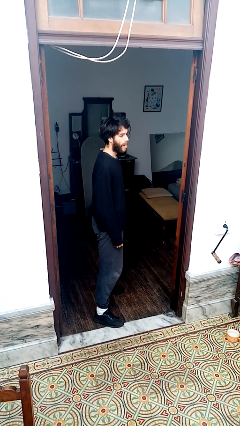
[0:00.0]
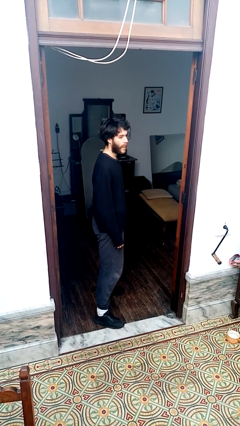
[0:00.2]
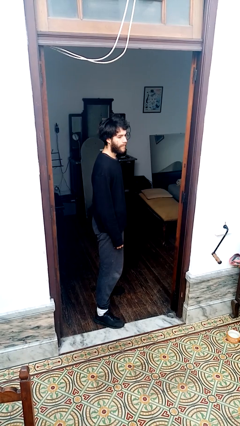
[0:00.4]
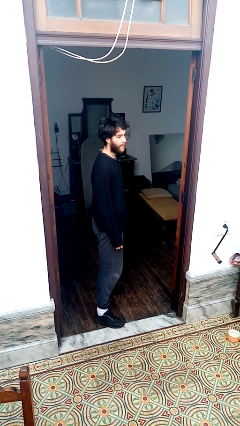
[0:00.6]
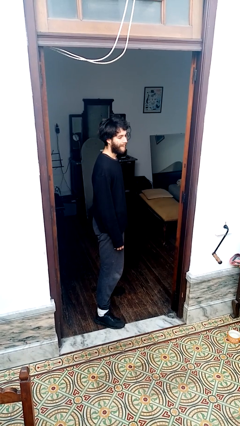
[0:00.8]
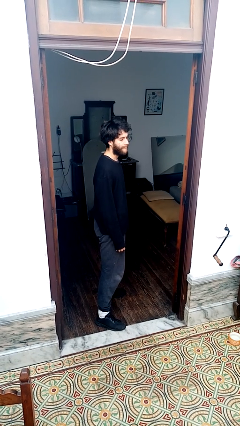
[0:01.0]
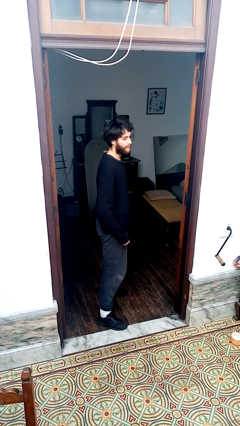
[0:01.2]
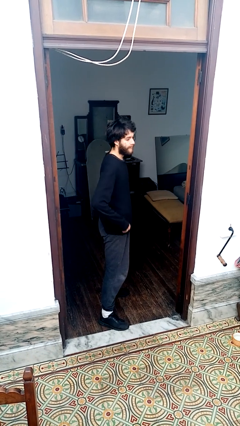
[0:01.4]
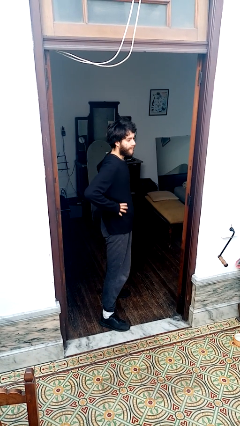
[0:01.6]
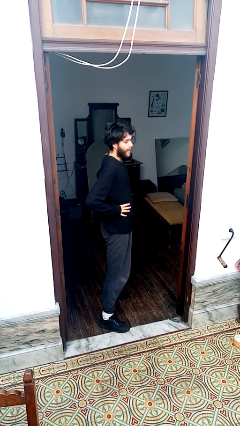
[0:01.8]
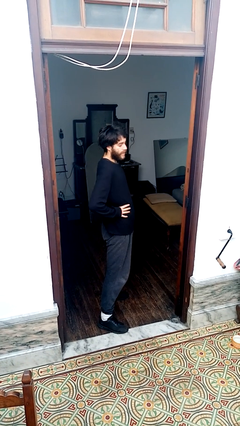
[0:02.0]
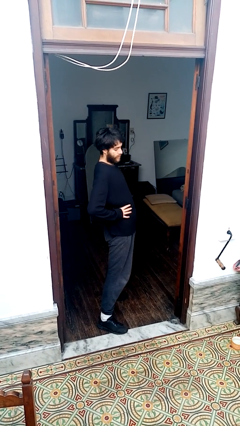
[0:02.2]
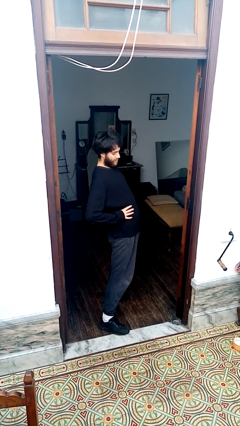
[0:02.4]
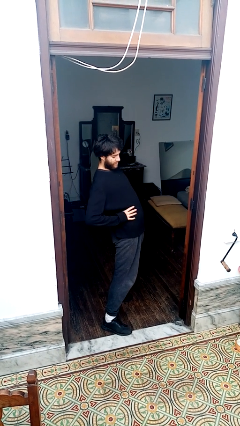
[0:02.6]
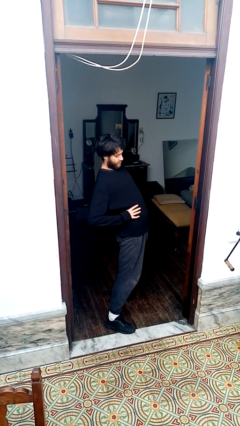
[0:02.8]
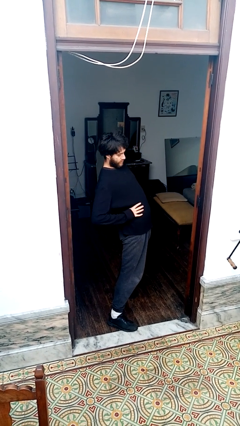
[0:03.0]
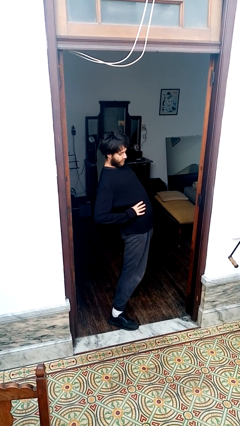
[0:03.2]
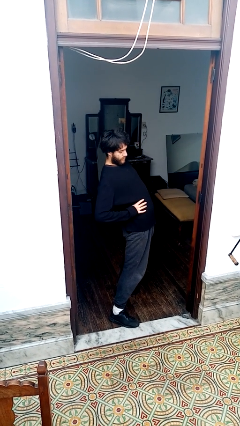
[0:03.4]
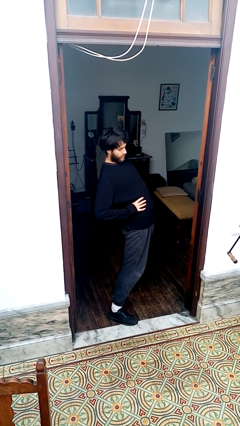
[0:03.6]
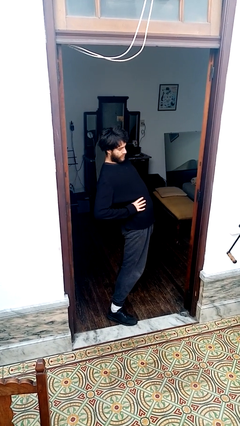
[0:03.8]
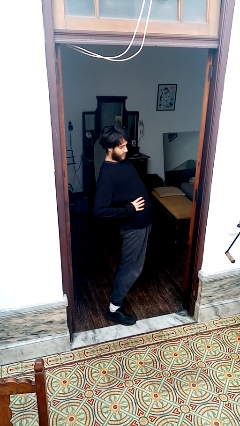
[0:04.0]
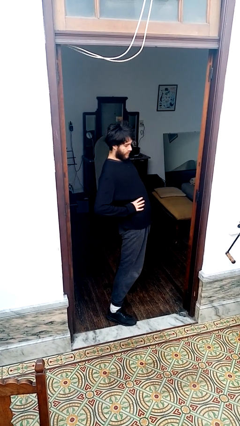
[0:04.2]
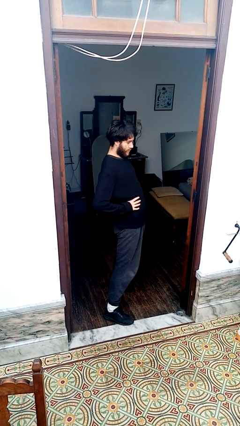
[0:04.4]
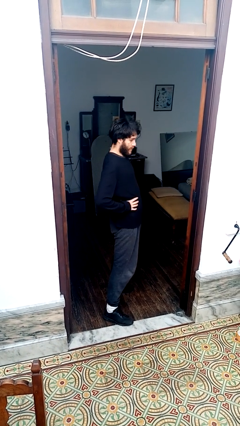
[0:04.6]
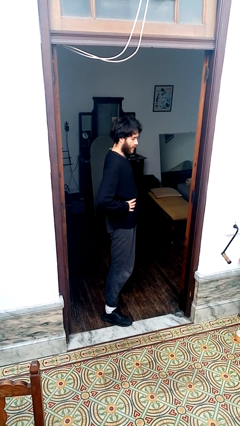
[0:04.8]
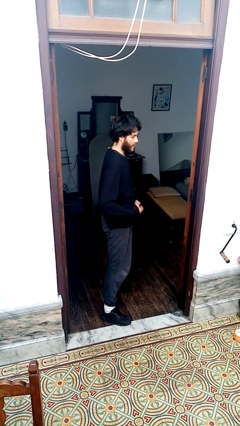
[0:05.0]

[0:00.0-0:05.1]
person stretches back

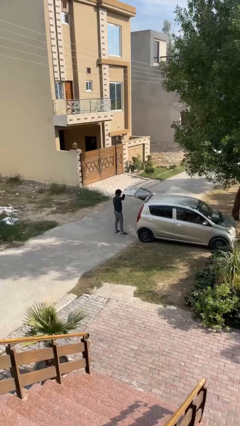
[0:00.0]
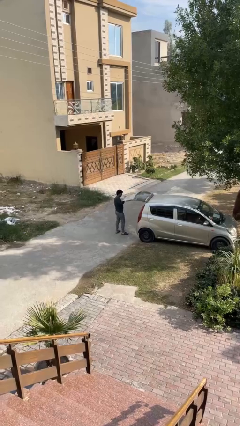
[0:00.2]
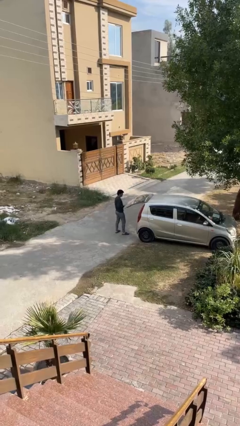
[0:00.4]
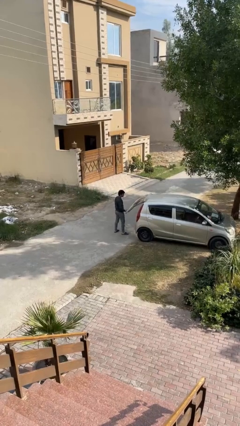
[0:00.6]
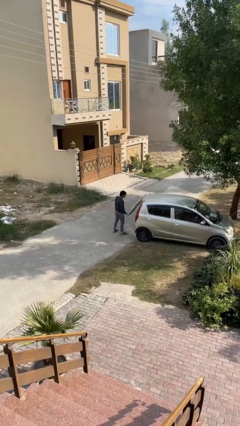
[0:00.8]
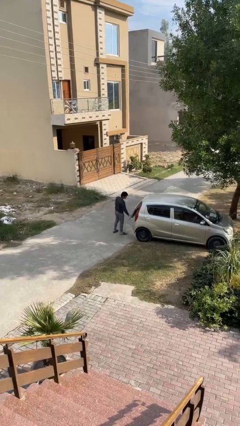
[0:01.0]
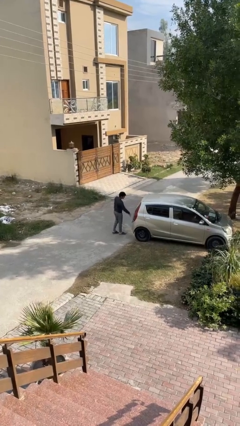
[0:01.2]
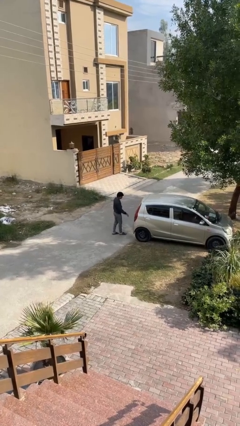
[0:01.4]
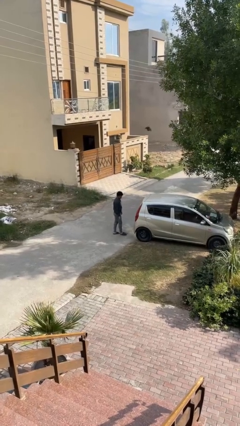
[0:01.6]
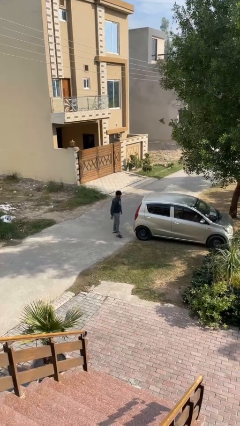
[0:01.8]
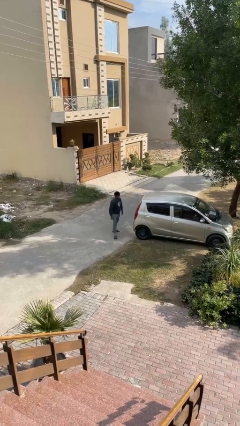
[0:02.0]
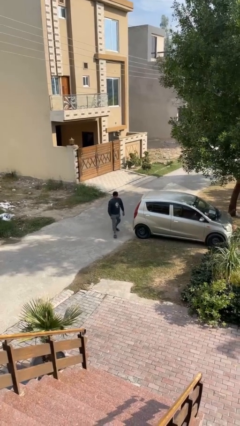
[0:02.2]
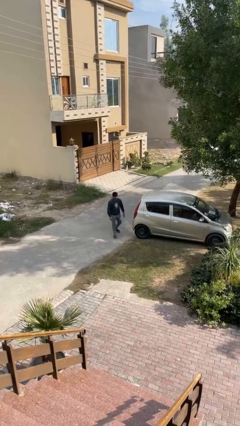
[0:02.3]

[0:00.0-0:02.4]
person closes car trunk

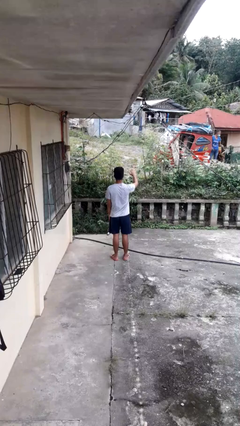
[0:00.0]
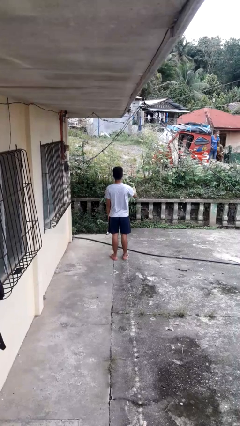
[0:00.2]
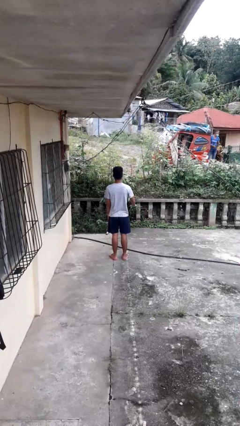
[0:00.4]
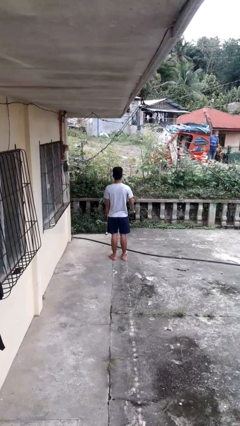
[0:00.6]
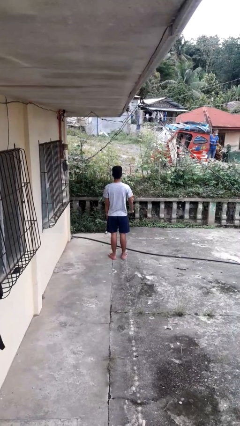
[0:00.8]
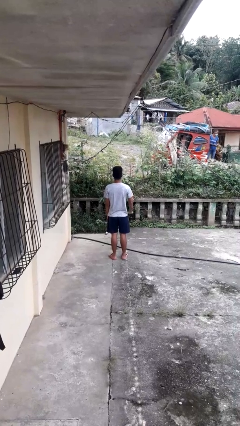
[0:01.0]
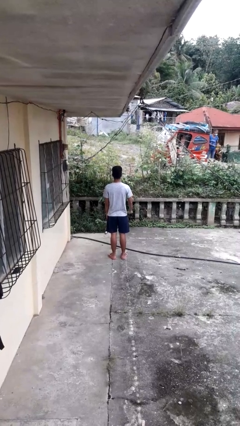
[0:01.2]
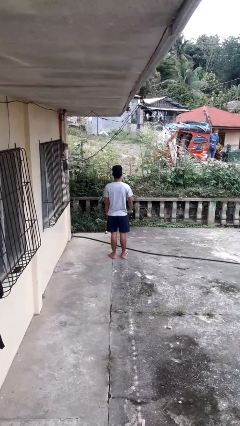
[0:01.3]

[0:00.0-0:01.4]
person gestures swipe down

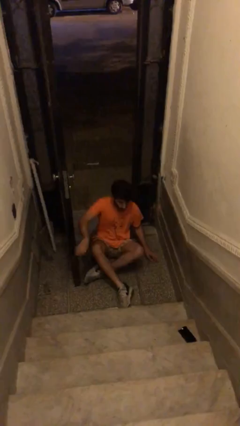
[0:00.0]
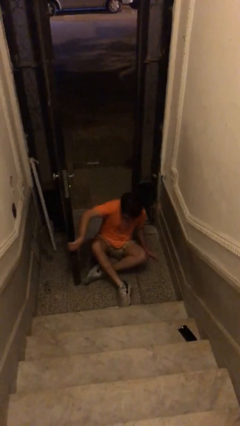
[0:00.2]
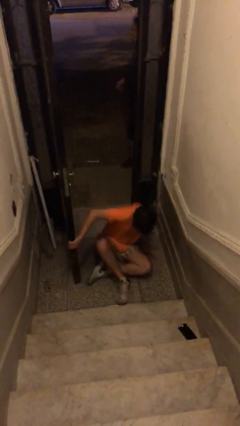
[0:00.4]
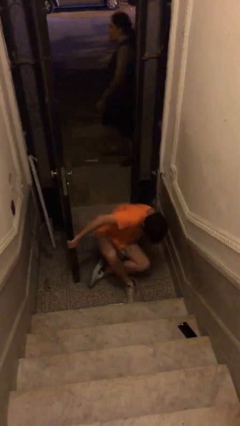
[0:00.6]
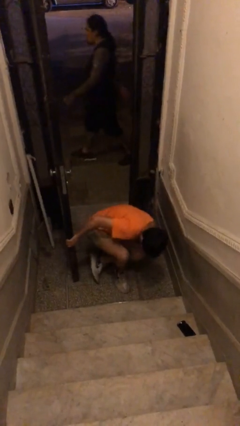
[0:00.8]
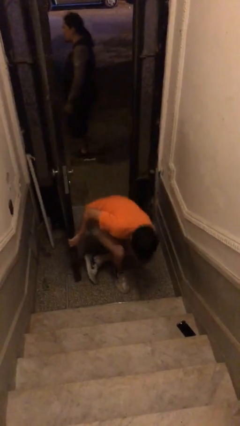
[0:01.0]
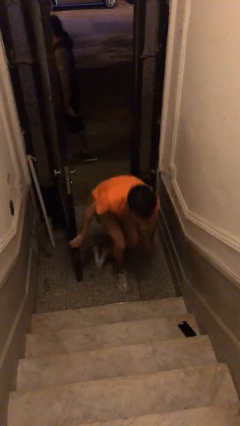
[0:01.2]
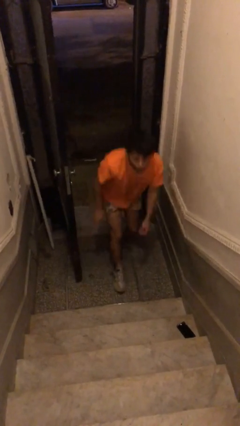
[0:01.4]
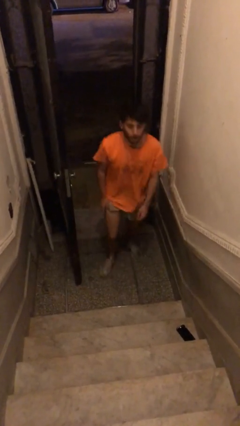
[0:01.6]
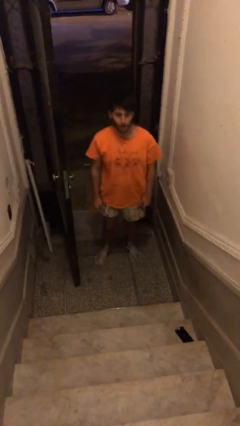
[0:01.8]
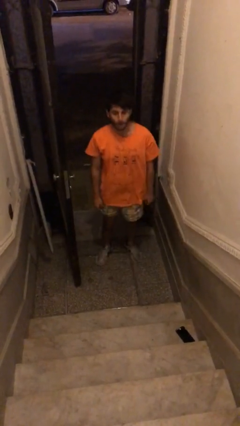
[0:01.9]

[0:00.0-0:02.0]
person stands up

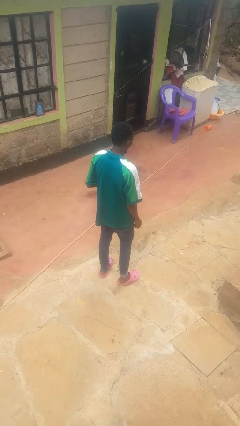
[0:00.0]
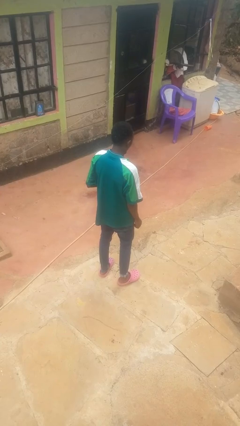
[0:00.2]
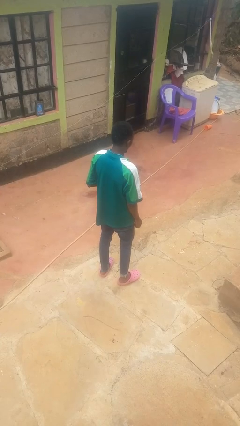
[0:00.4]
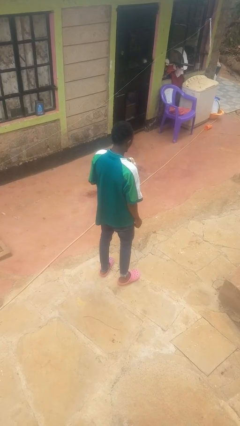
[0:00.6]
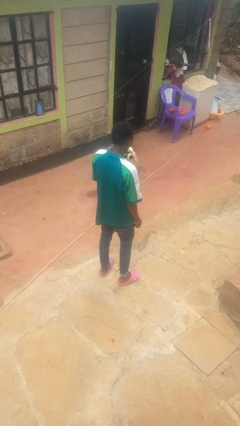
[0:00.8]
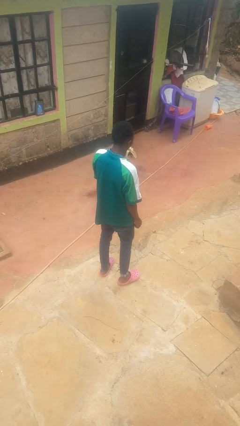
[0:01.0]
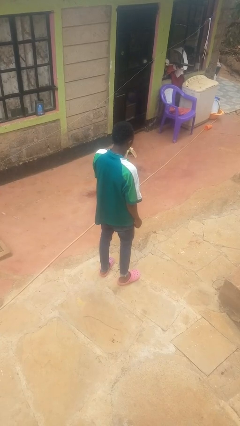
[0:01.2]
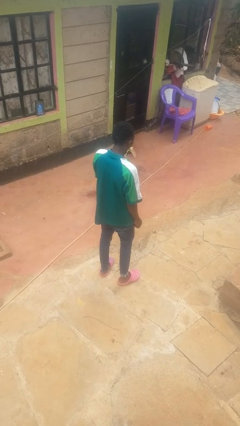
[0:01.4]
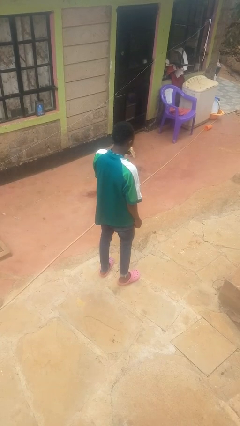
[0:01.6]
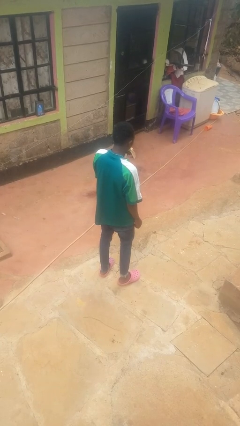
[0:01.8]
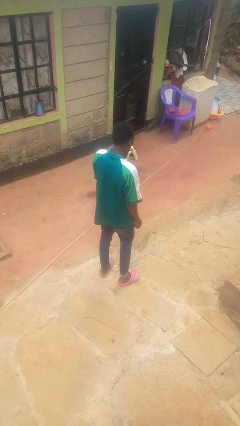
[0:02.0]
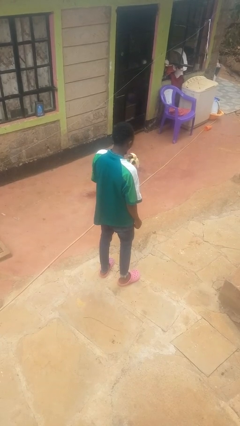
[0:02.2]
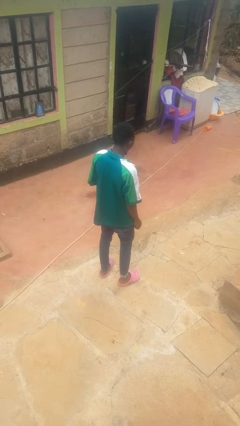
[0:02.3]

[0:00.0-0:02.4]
person eats banana

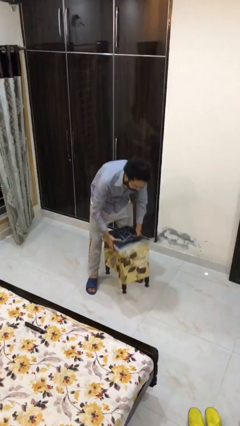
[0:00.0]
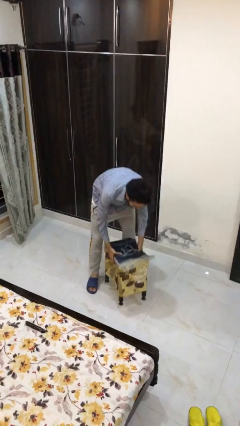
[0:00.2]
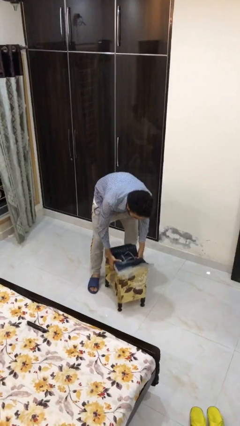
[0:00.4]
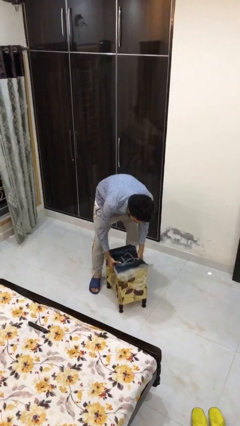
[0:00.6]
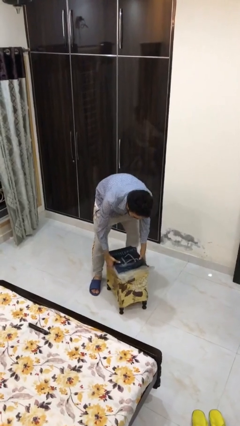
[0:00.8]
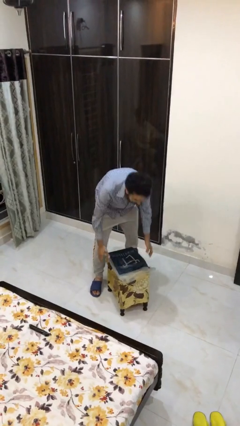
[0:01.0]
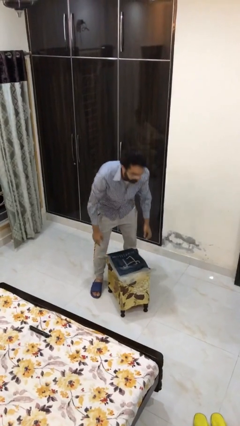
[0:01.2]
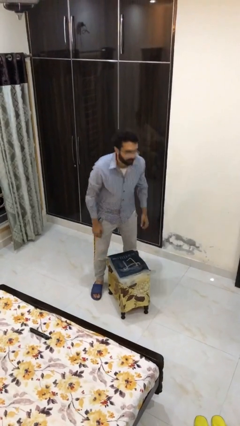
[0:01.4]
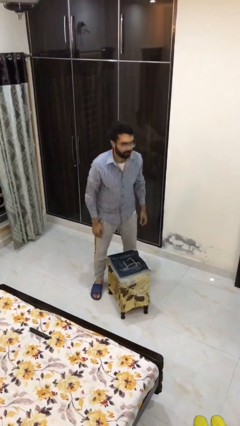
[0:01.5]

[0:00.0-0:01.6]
person puts down object on floor

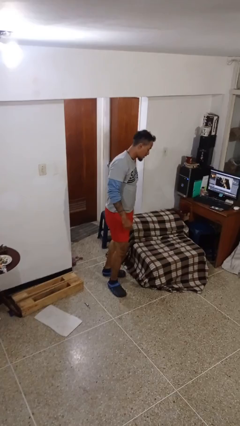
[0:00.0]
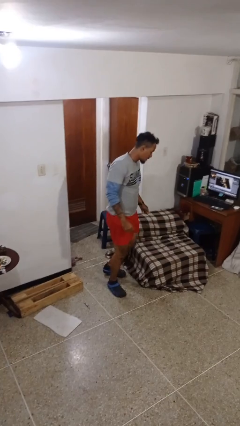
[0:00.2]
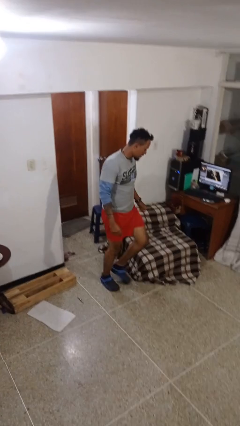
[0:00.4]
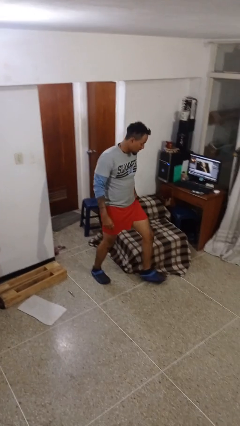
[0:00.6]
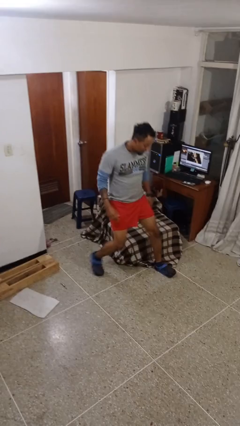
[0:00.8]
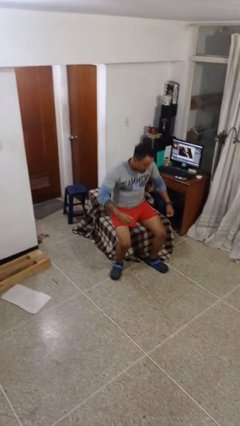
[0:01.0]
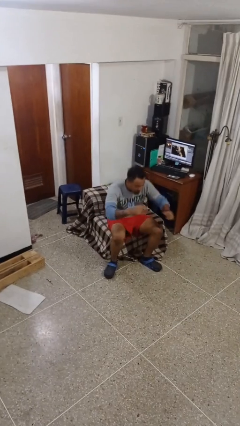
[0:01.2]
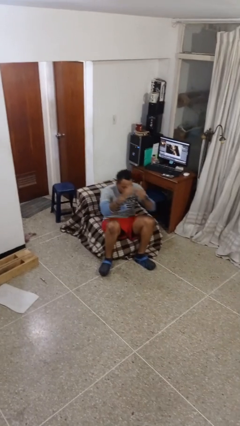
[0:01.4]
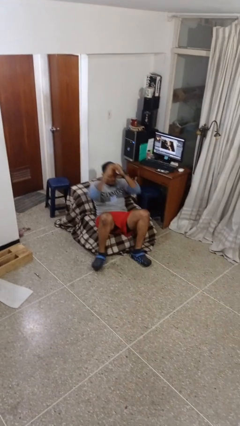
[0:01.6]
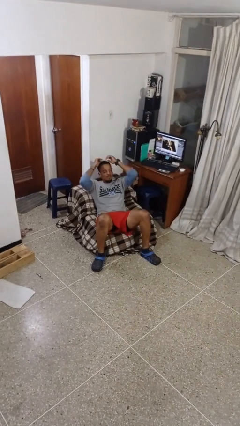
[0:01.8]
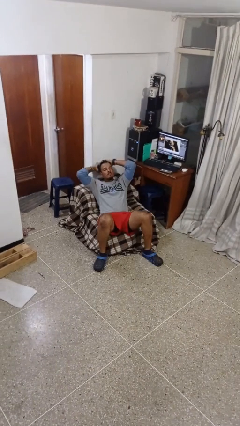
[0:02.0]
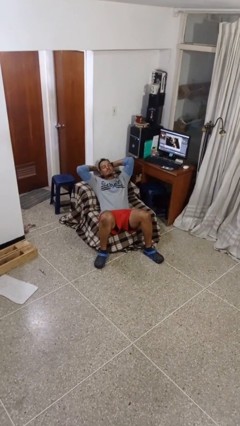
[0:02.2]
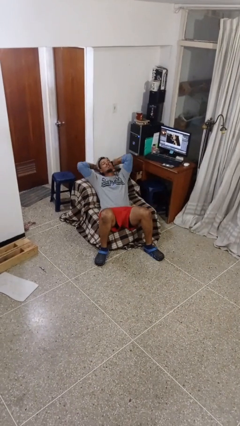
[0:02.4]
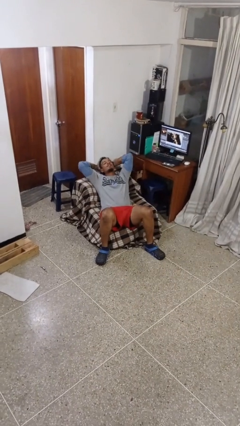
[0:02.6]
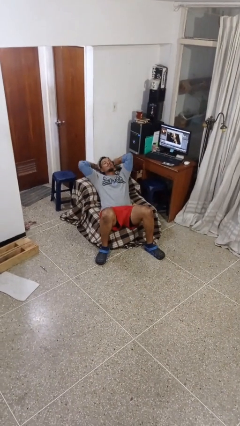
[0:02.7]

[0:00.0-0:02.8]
person lies down on couch
